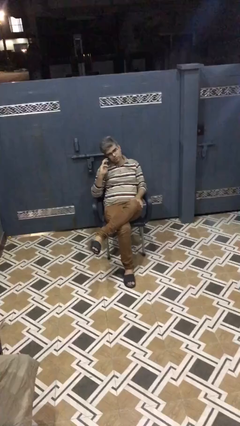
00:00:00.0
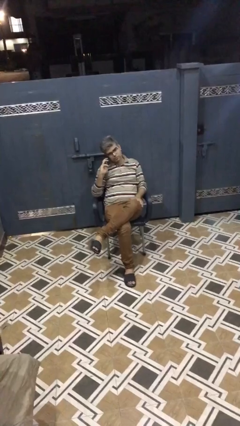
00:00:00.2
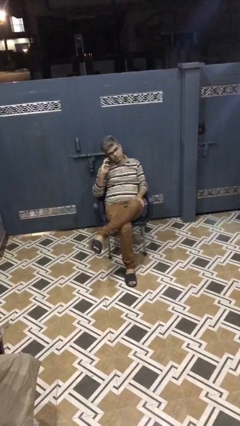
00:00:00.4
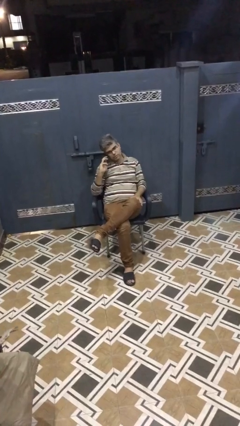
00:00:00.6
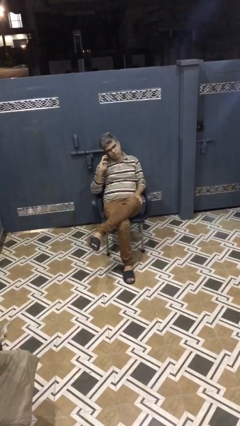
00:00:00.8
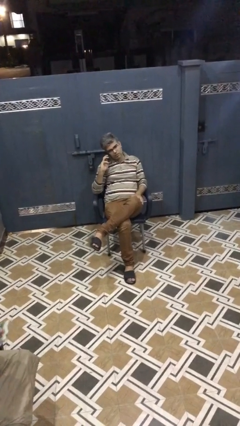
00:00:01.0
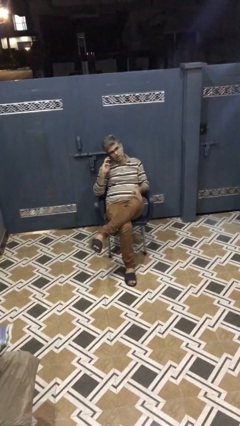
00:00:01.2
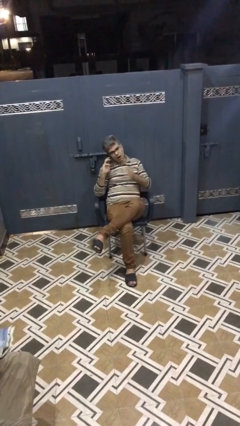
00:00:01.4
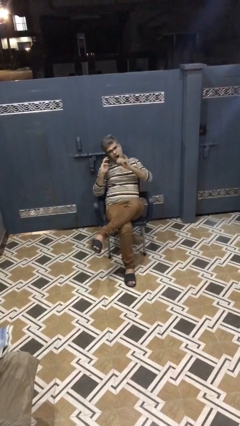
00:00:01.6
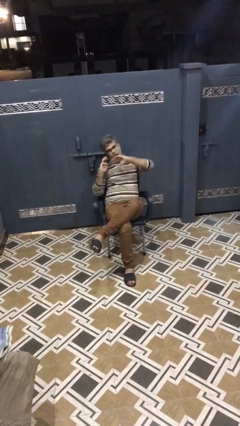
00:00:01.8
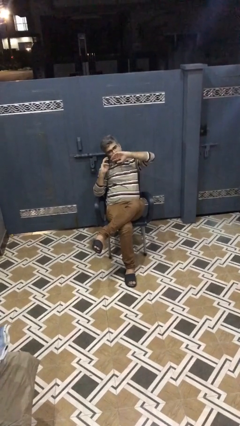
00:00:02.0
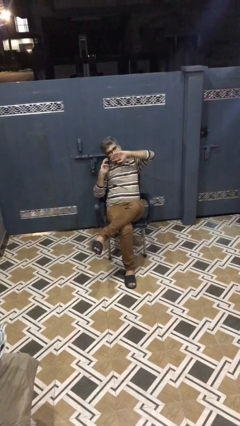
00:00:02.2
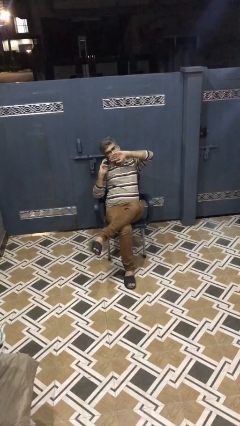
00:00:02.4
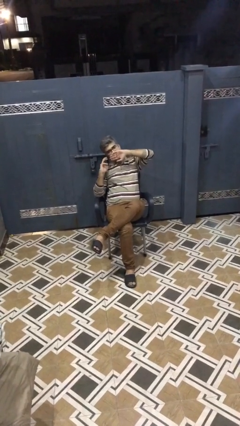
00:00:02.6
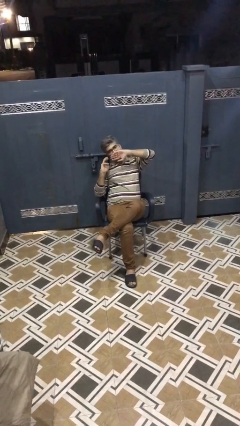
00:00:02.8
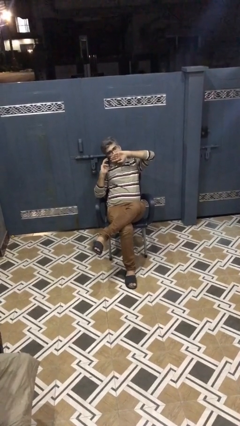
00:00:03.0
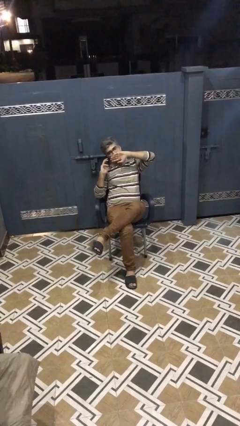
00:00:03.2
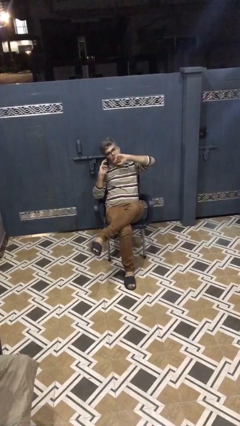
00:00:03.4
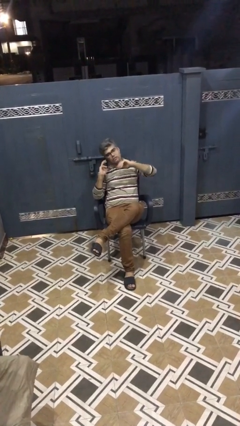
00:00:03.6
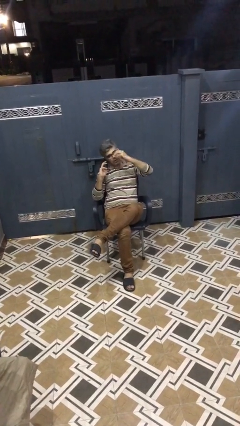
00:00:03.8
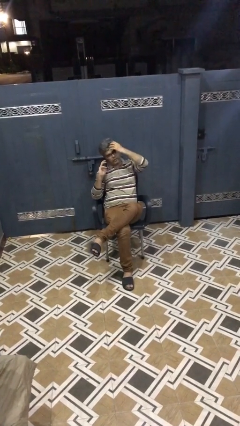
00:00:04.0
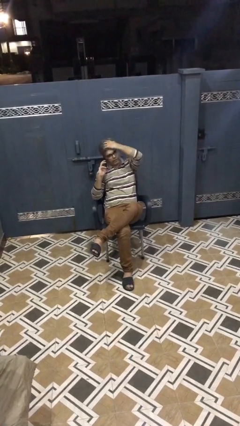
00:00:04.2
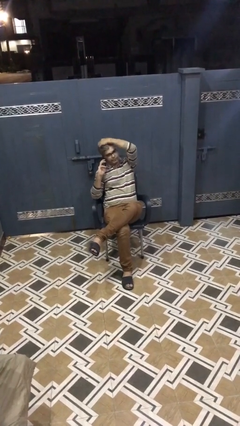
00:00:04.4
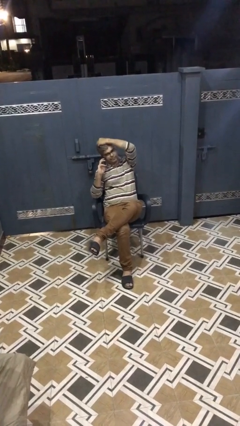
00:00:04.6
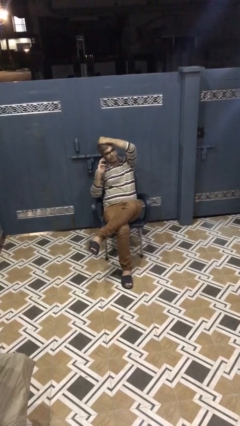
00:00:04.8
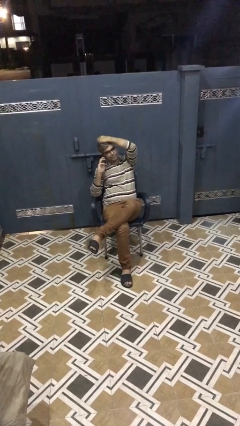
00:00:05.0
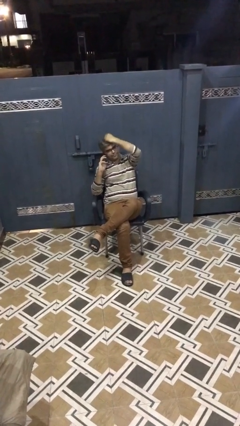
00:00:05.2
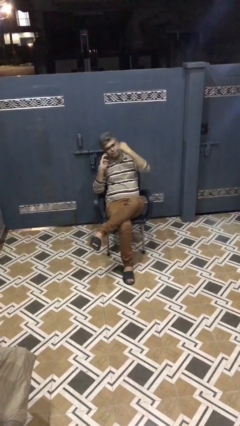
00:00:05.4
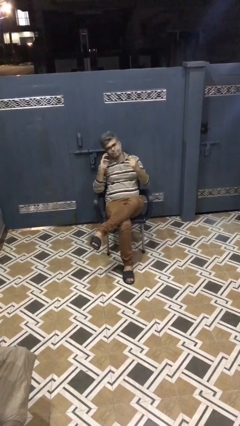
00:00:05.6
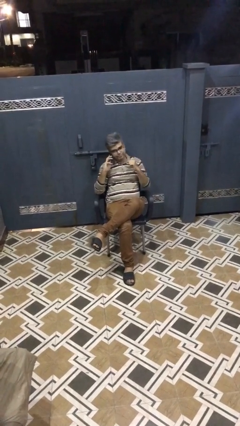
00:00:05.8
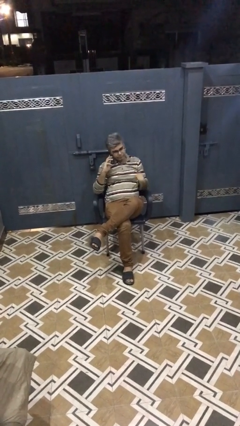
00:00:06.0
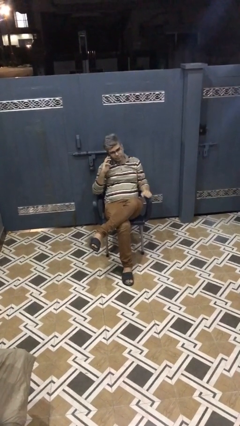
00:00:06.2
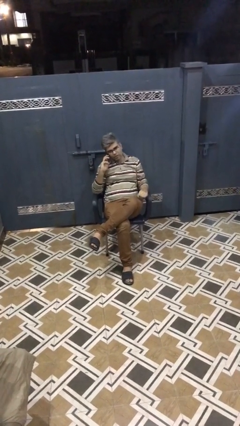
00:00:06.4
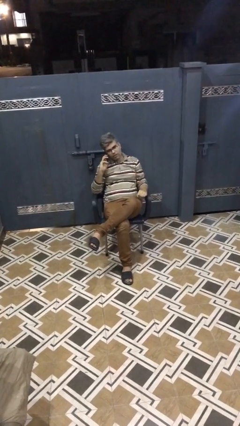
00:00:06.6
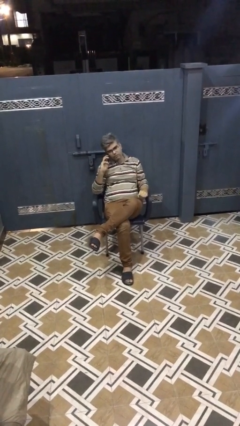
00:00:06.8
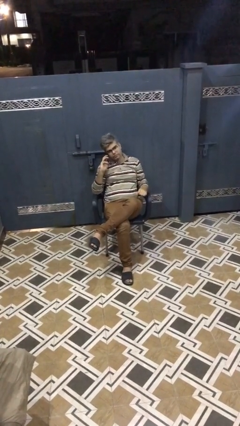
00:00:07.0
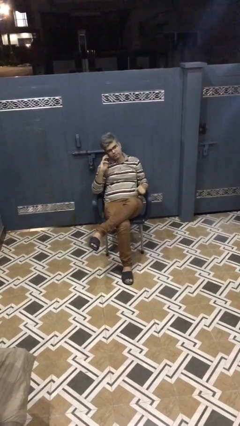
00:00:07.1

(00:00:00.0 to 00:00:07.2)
person talks on phone

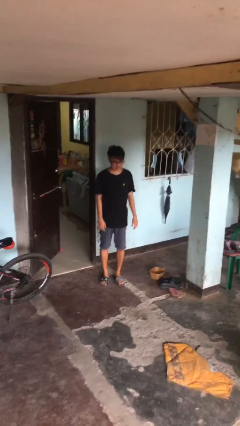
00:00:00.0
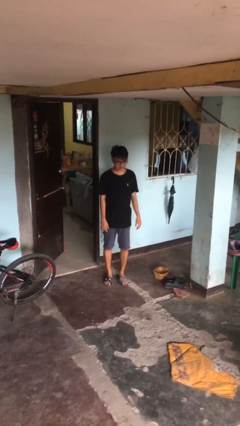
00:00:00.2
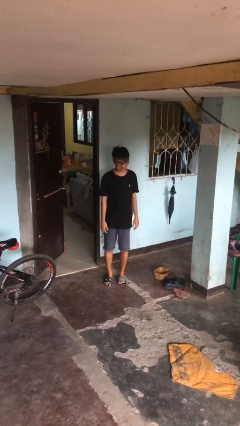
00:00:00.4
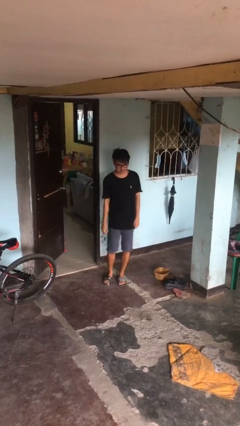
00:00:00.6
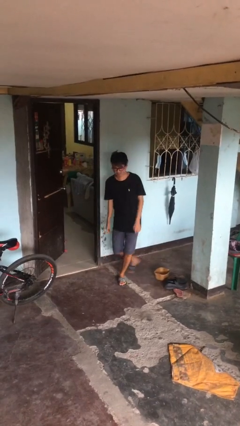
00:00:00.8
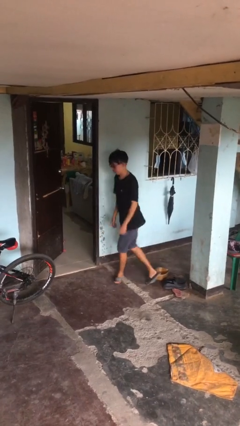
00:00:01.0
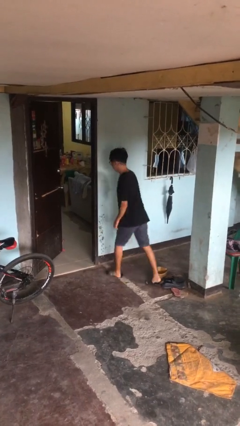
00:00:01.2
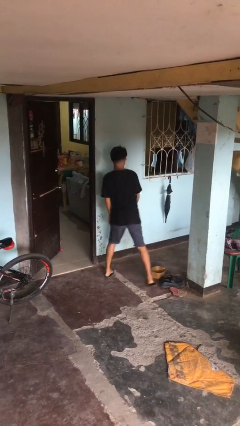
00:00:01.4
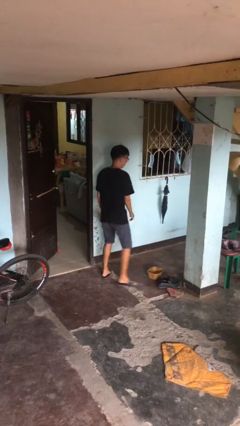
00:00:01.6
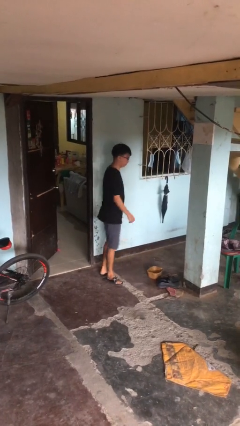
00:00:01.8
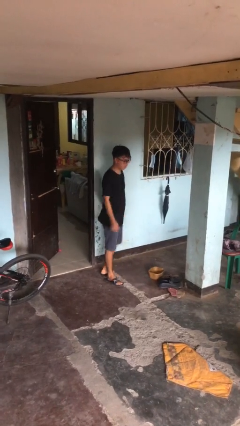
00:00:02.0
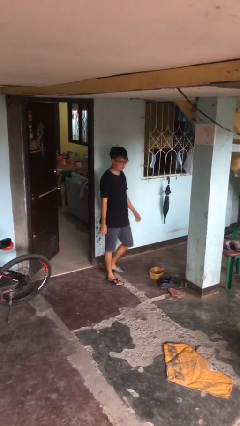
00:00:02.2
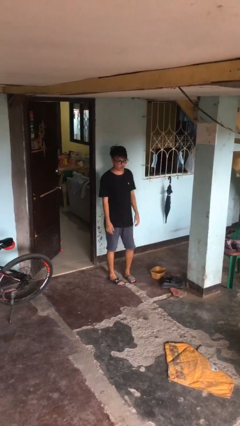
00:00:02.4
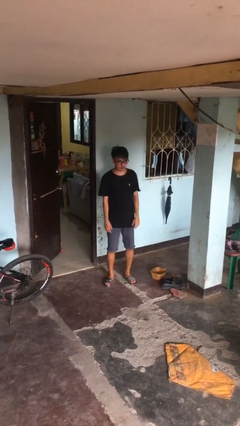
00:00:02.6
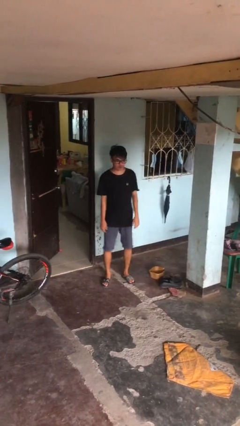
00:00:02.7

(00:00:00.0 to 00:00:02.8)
person twirls

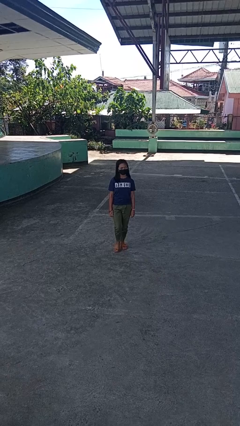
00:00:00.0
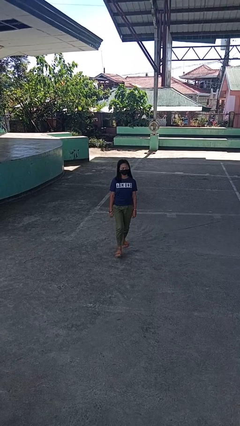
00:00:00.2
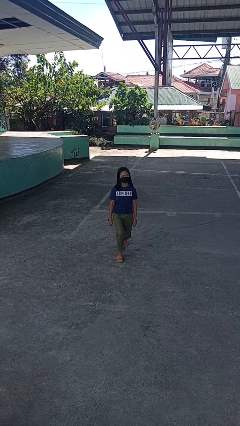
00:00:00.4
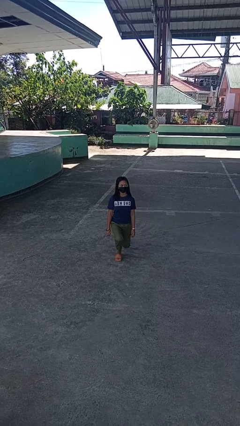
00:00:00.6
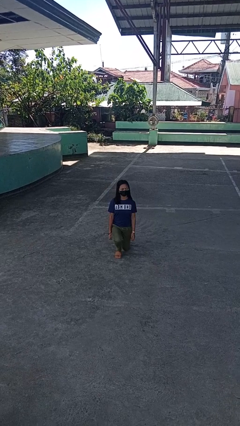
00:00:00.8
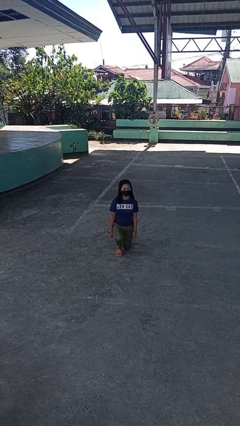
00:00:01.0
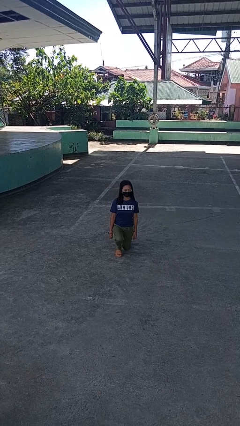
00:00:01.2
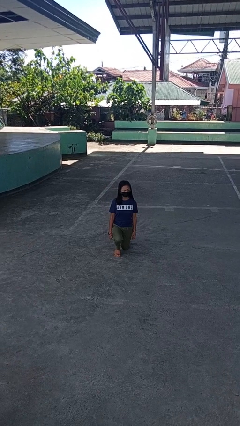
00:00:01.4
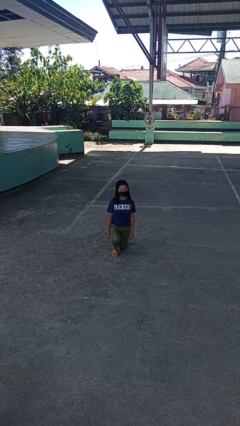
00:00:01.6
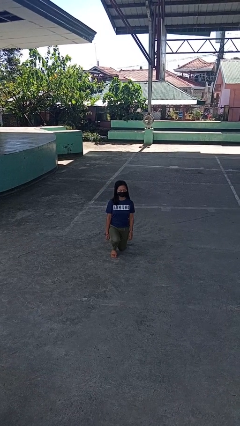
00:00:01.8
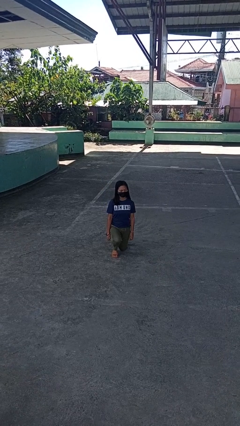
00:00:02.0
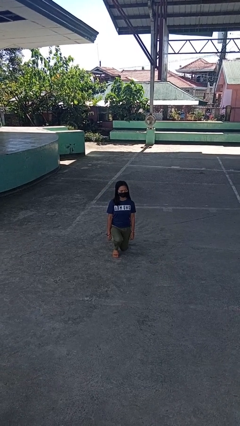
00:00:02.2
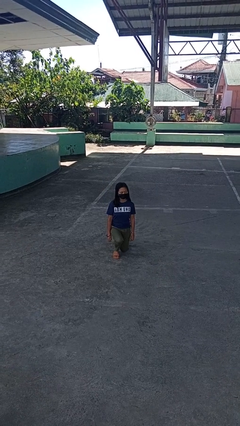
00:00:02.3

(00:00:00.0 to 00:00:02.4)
person kneels

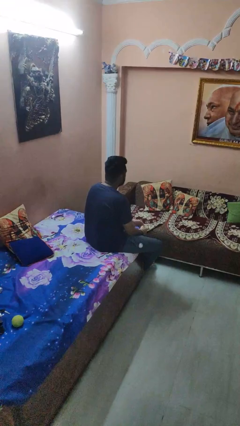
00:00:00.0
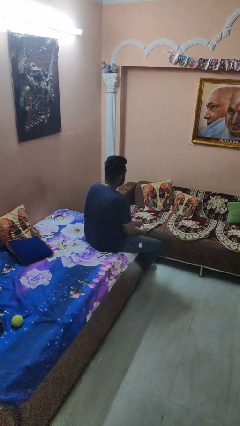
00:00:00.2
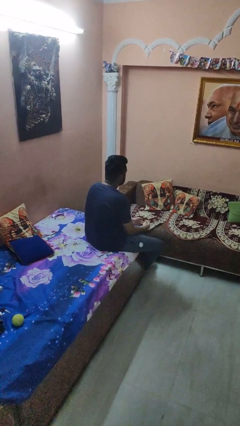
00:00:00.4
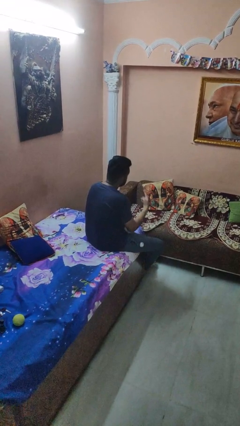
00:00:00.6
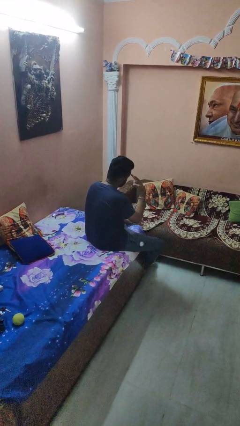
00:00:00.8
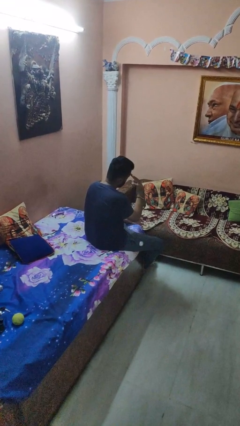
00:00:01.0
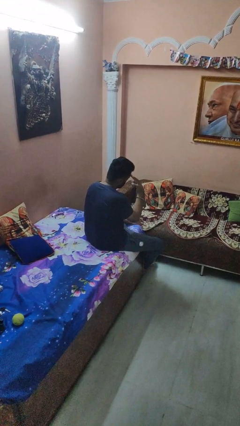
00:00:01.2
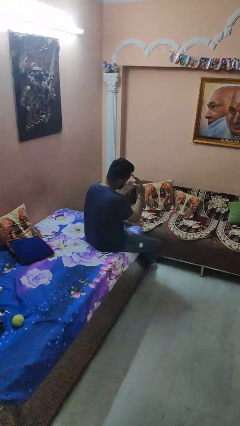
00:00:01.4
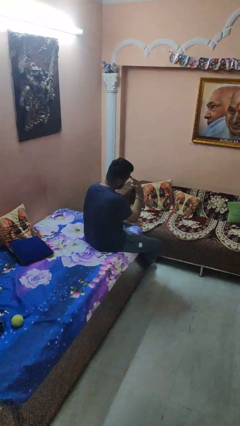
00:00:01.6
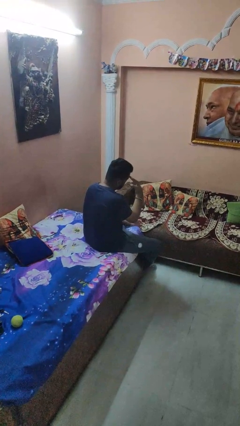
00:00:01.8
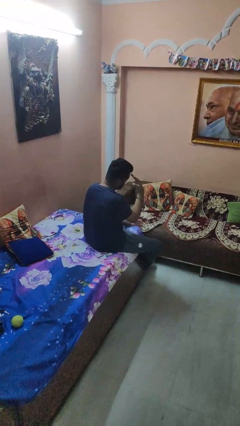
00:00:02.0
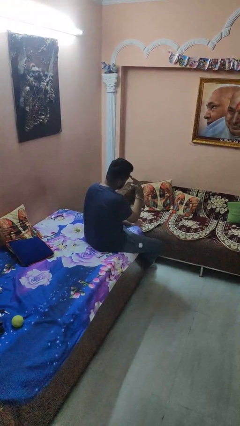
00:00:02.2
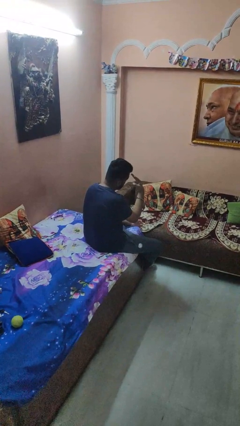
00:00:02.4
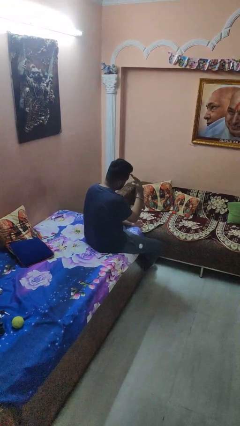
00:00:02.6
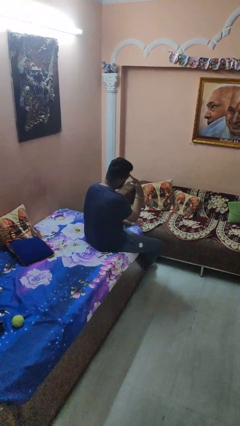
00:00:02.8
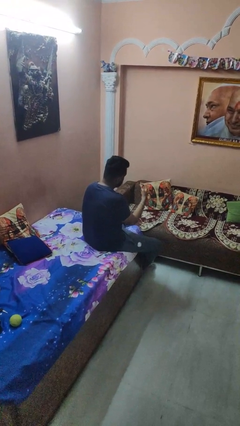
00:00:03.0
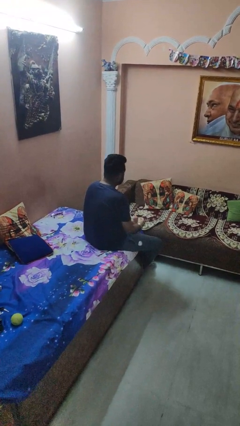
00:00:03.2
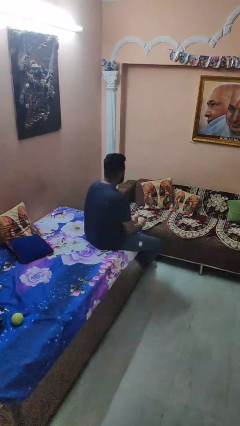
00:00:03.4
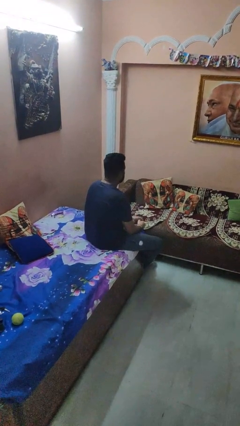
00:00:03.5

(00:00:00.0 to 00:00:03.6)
person gestures watch closely

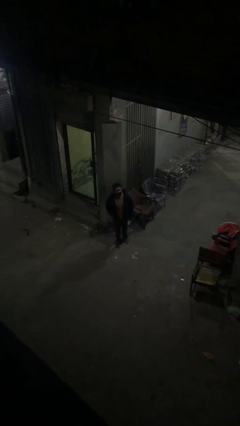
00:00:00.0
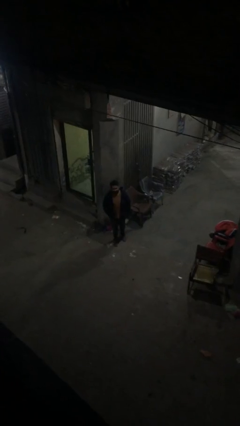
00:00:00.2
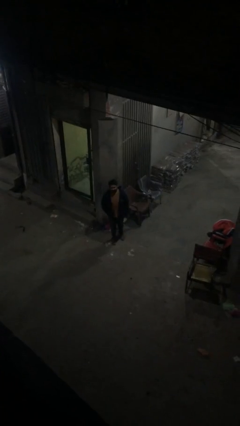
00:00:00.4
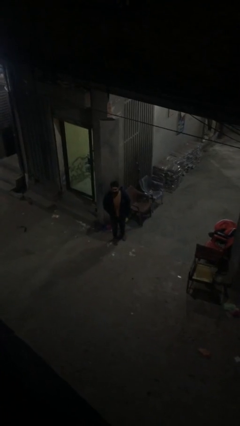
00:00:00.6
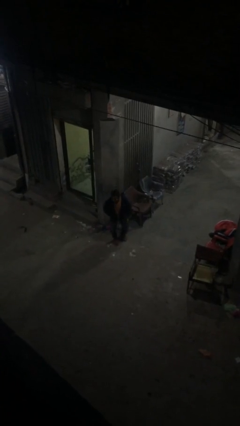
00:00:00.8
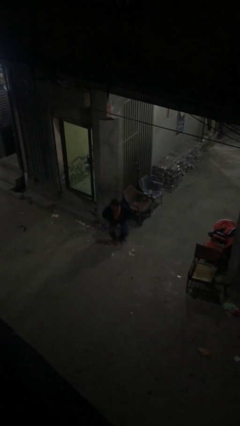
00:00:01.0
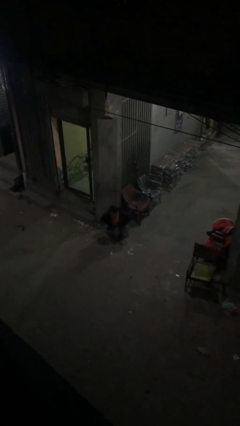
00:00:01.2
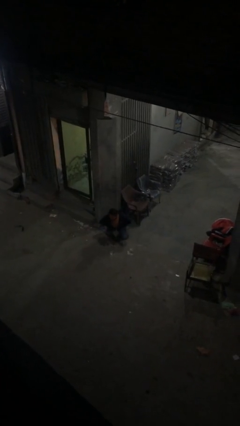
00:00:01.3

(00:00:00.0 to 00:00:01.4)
person sits down
